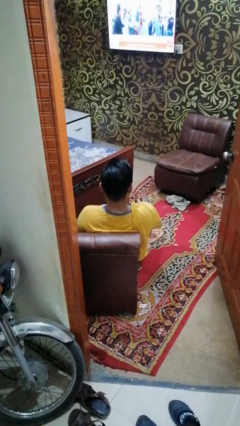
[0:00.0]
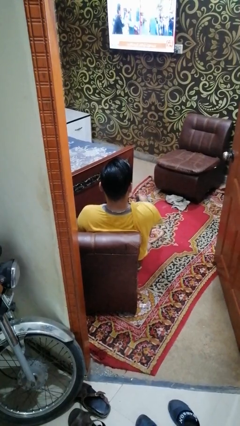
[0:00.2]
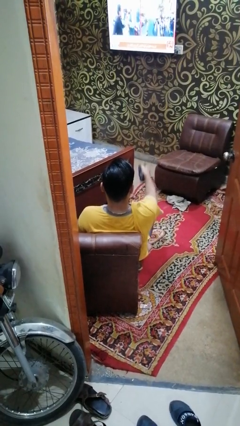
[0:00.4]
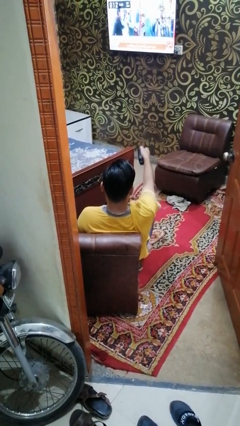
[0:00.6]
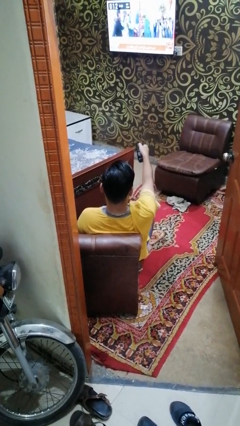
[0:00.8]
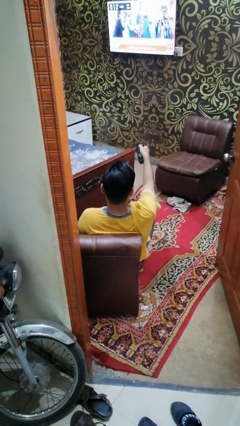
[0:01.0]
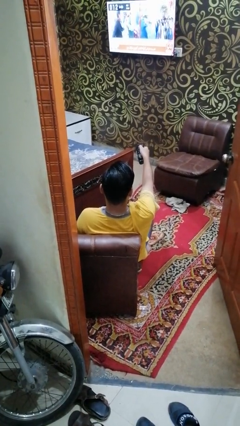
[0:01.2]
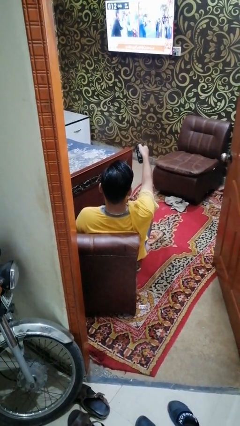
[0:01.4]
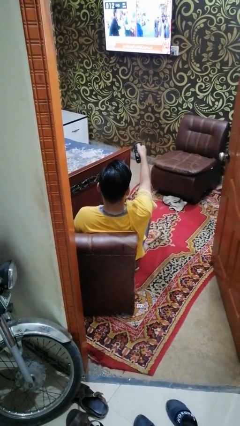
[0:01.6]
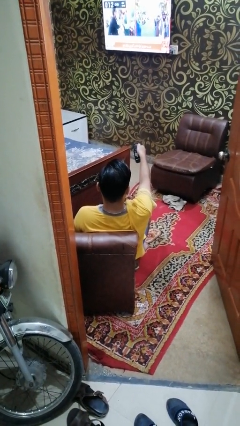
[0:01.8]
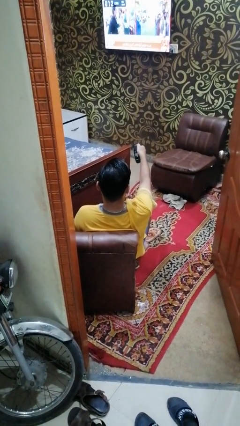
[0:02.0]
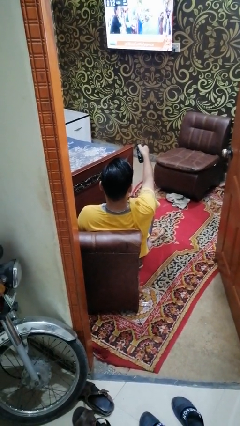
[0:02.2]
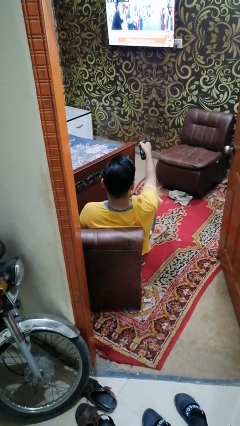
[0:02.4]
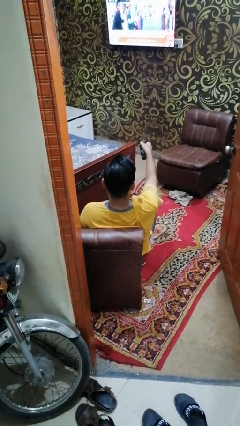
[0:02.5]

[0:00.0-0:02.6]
person uses television remote

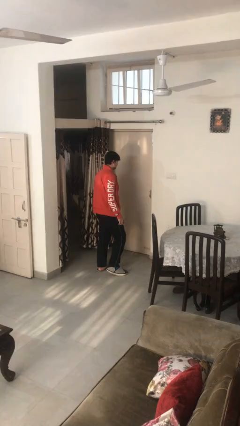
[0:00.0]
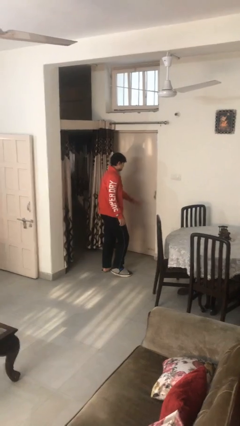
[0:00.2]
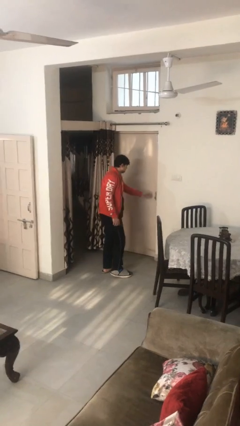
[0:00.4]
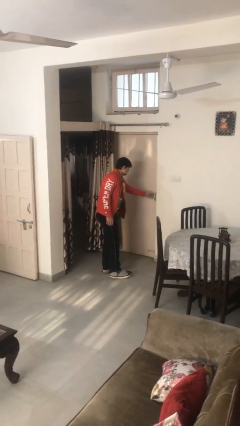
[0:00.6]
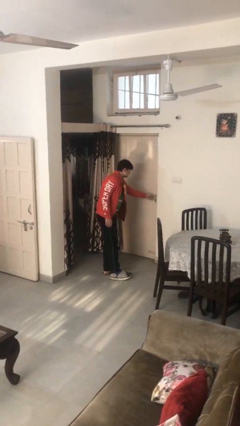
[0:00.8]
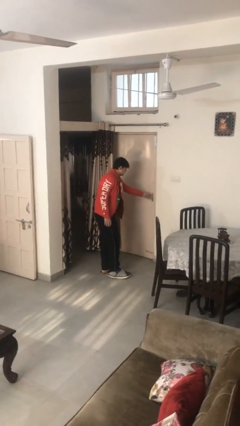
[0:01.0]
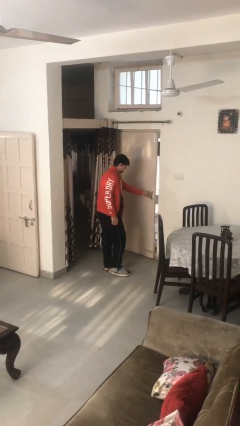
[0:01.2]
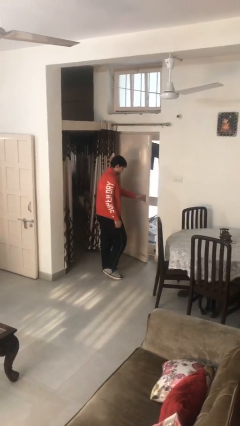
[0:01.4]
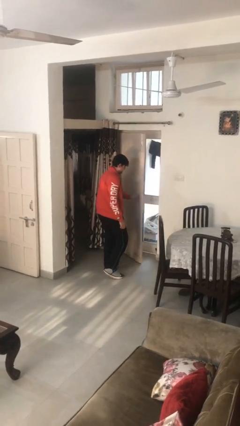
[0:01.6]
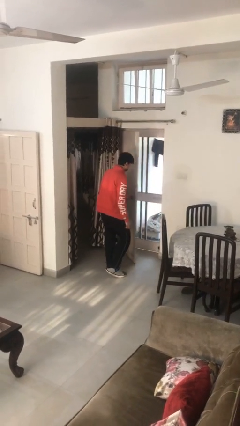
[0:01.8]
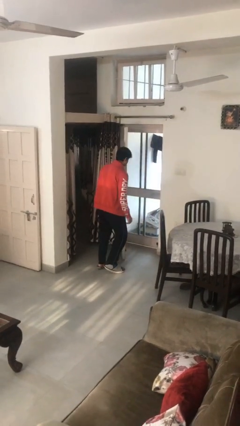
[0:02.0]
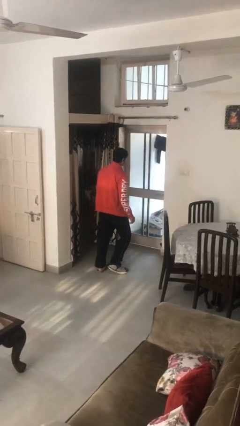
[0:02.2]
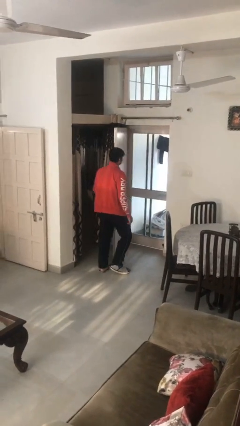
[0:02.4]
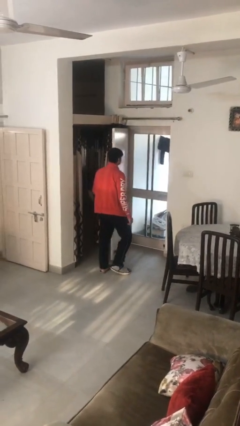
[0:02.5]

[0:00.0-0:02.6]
person opens facility door

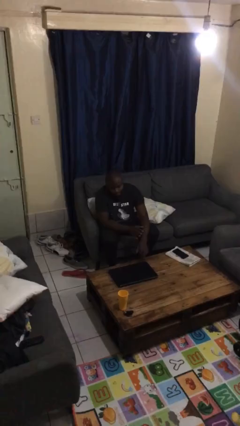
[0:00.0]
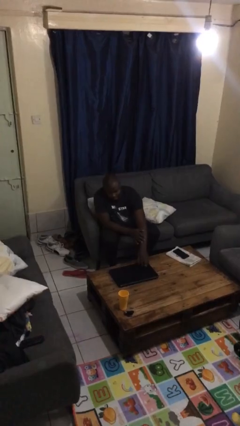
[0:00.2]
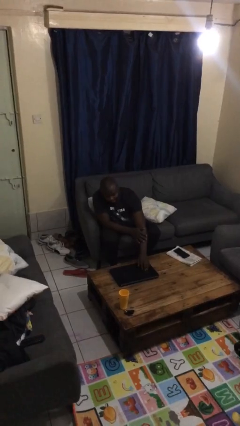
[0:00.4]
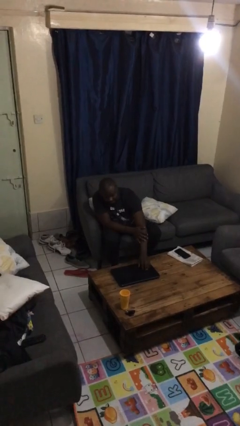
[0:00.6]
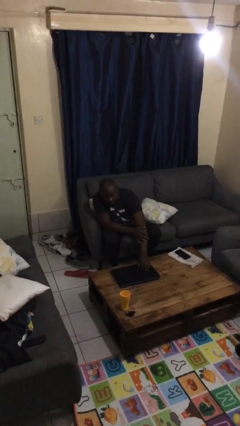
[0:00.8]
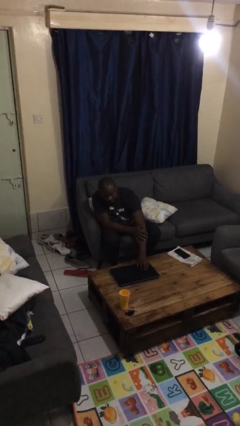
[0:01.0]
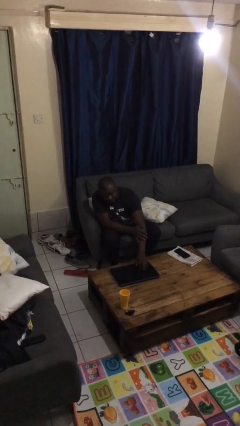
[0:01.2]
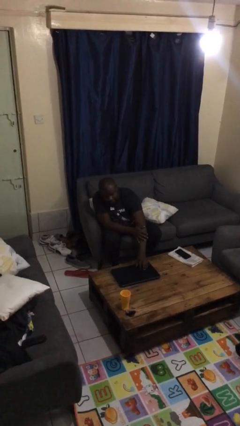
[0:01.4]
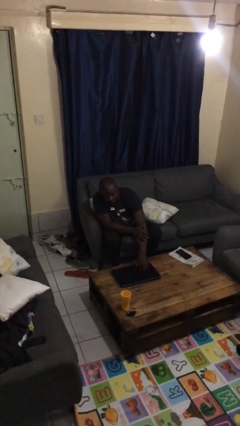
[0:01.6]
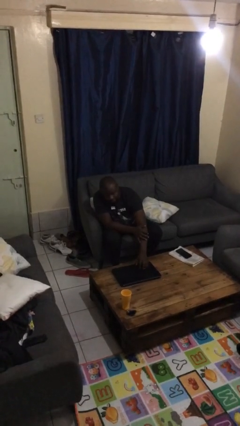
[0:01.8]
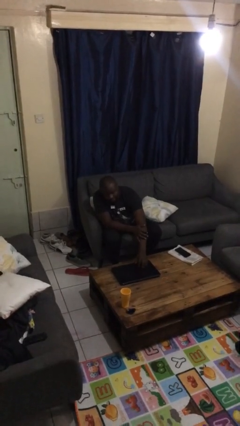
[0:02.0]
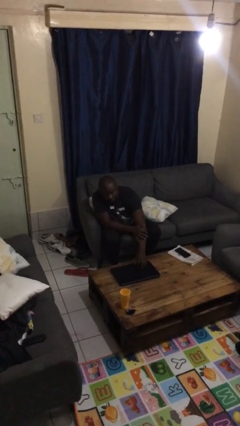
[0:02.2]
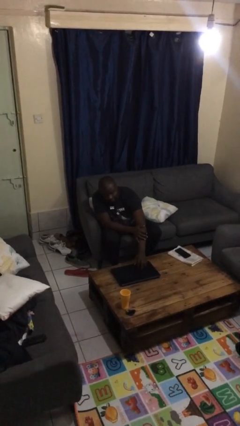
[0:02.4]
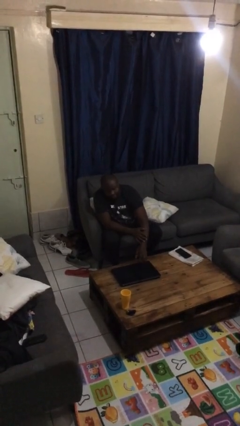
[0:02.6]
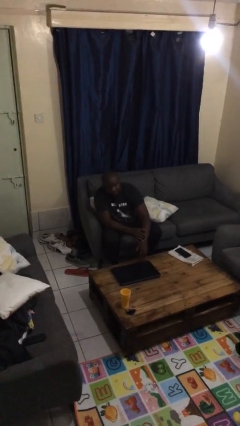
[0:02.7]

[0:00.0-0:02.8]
person taps object with finger

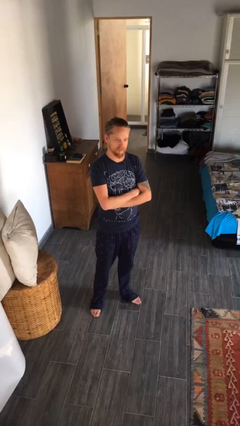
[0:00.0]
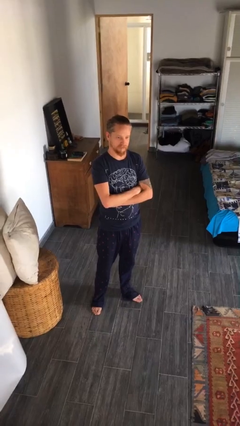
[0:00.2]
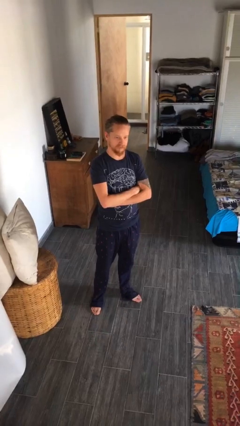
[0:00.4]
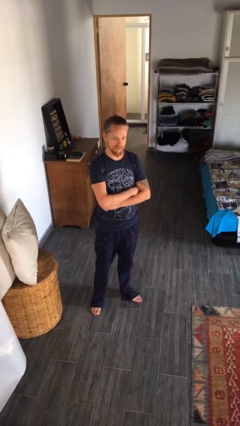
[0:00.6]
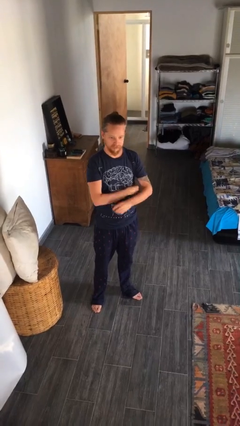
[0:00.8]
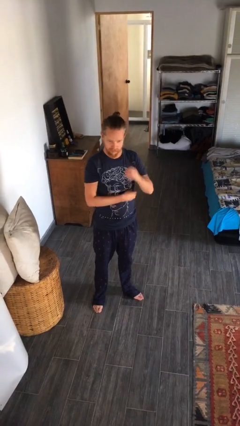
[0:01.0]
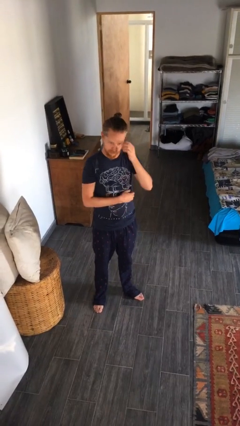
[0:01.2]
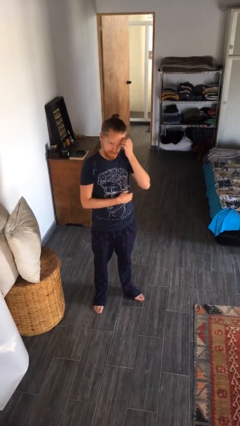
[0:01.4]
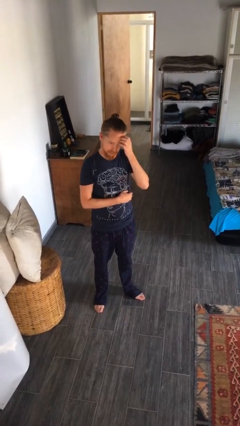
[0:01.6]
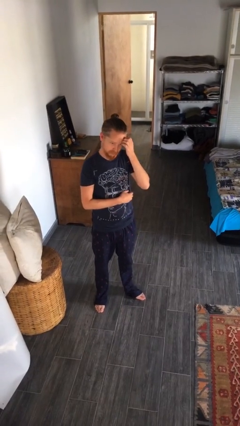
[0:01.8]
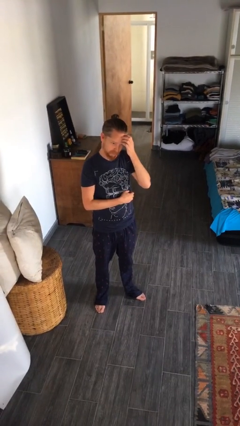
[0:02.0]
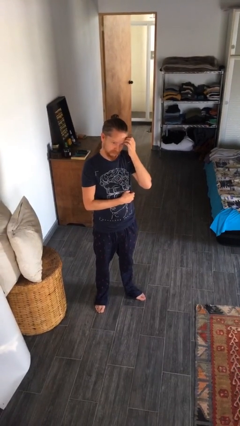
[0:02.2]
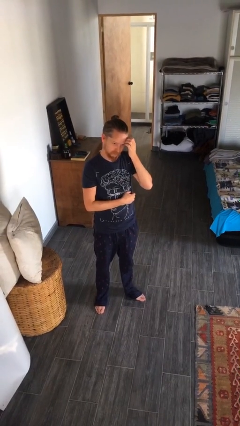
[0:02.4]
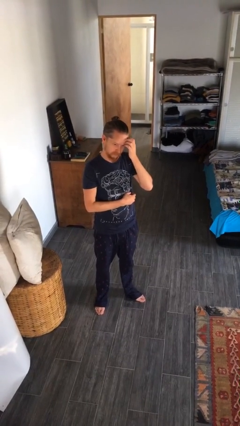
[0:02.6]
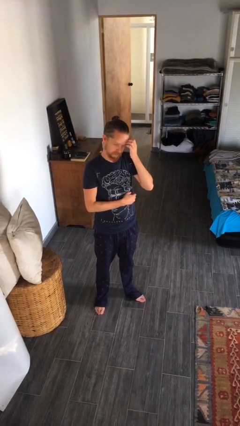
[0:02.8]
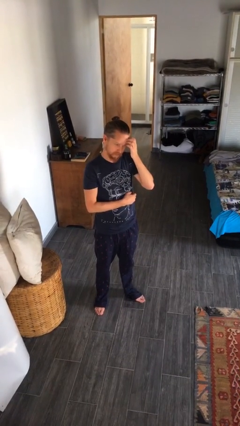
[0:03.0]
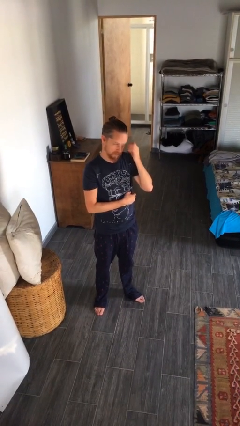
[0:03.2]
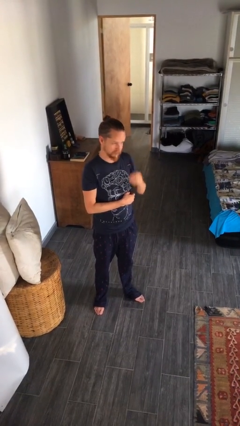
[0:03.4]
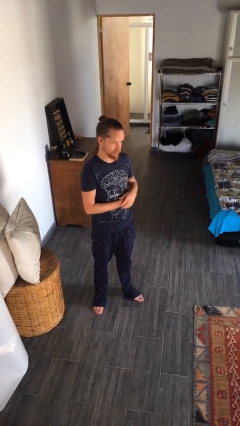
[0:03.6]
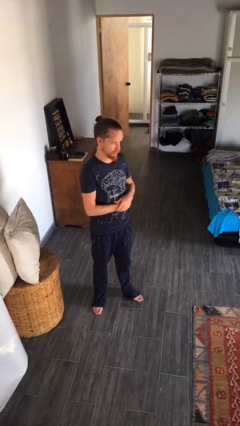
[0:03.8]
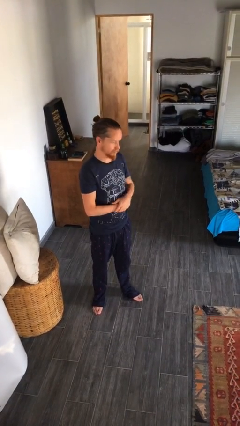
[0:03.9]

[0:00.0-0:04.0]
person scratches face

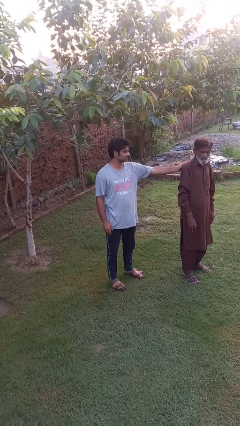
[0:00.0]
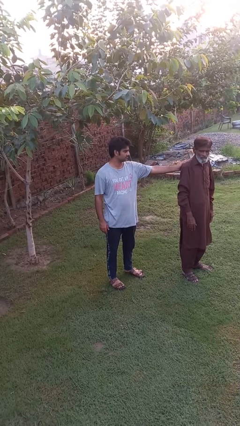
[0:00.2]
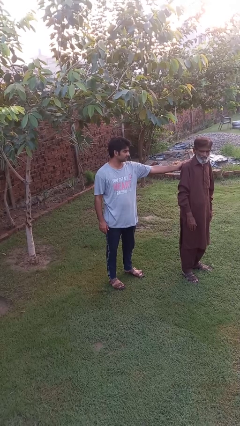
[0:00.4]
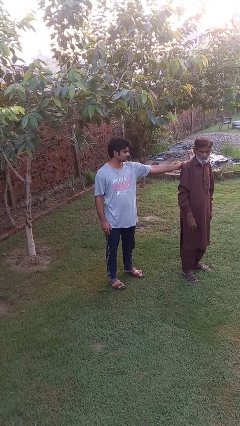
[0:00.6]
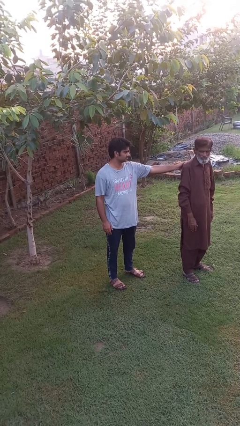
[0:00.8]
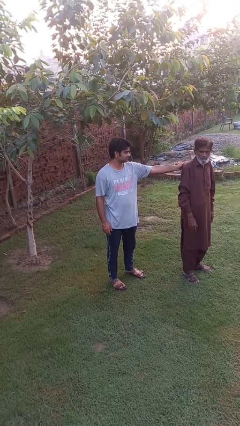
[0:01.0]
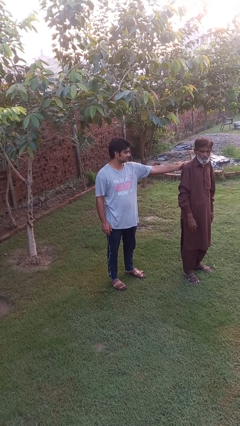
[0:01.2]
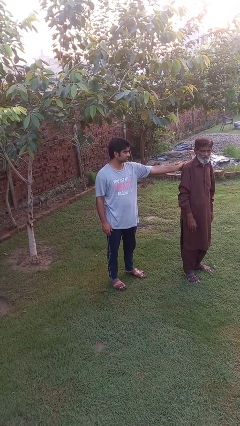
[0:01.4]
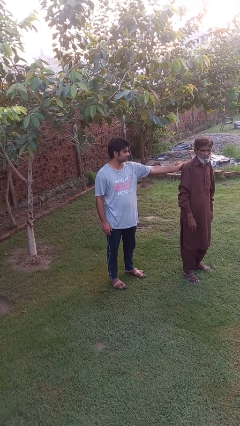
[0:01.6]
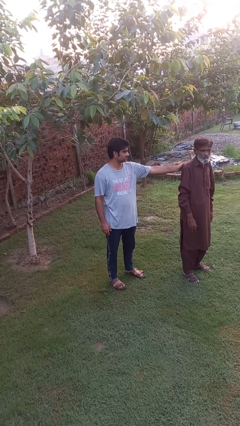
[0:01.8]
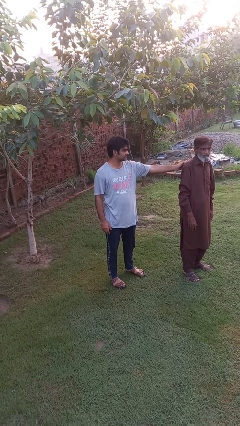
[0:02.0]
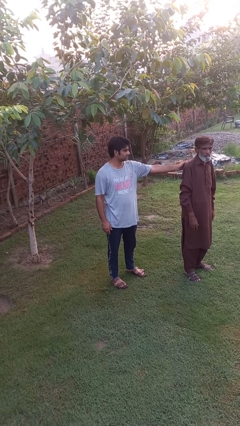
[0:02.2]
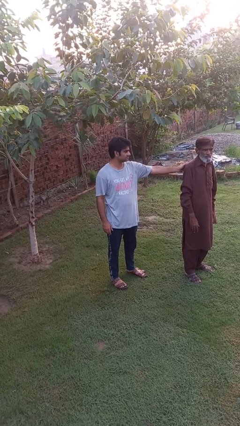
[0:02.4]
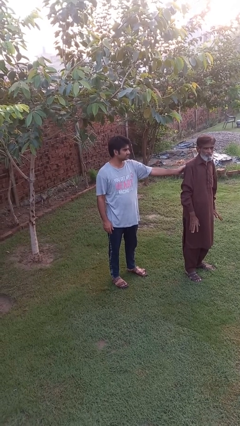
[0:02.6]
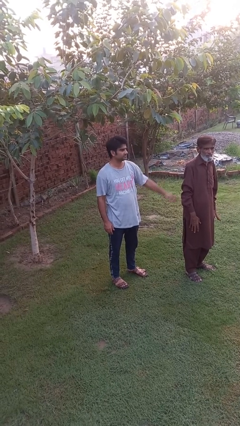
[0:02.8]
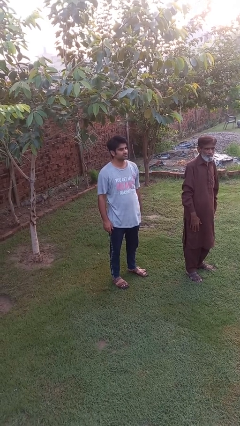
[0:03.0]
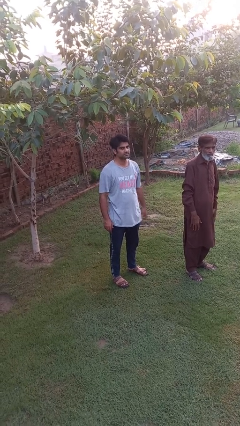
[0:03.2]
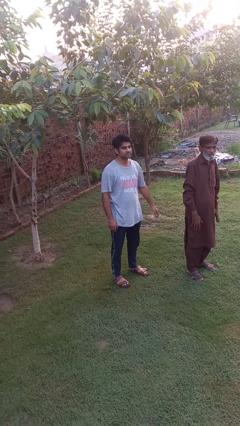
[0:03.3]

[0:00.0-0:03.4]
person touches back of person

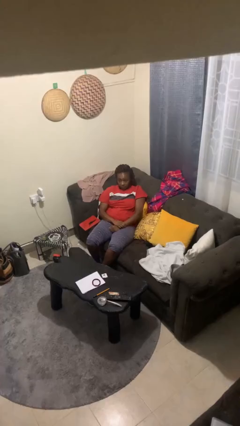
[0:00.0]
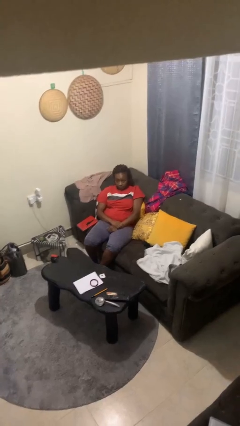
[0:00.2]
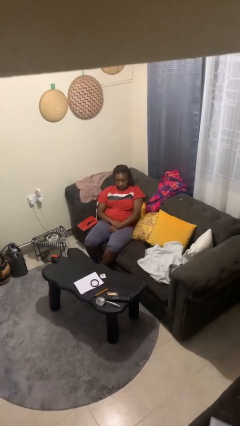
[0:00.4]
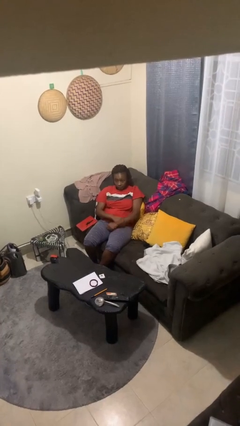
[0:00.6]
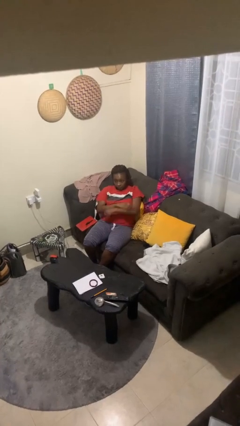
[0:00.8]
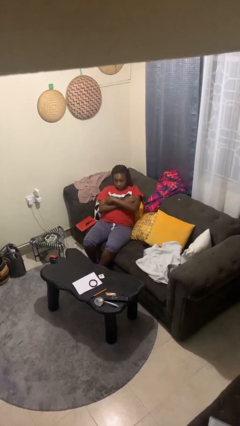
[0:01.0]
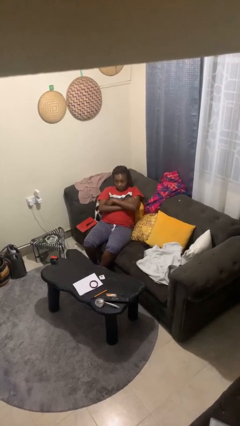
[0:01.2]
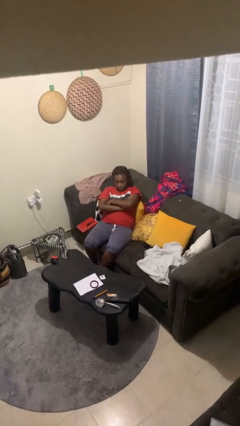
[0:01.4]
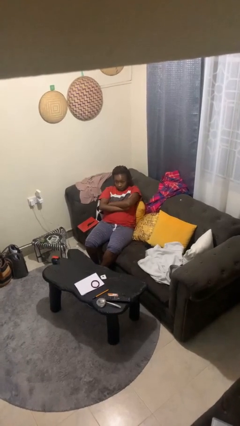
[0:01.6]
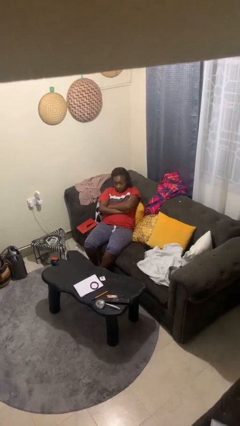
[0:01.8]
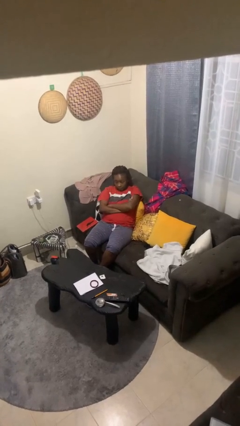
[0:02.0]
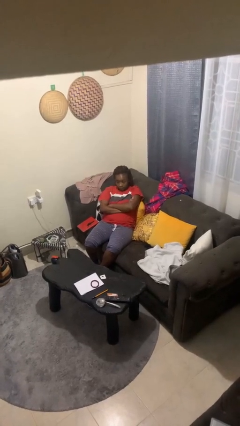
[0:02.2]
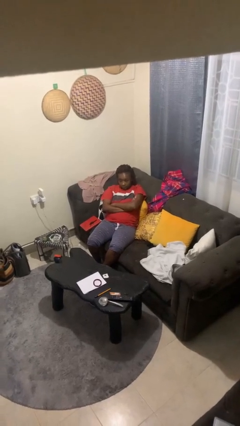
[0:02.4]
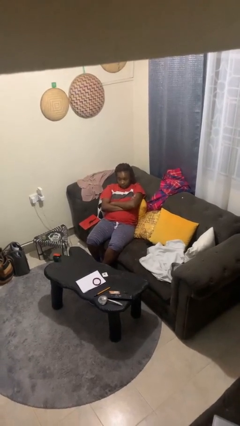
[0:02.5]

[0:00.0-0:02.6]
person crosses arms
